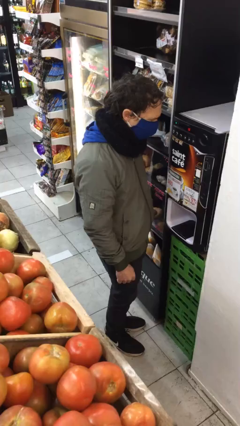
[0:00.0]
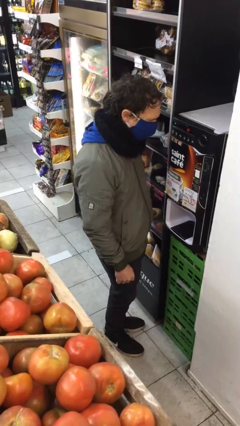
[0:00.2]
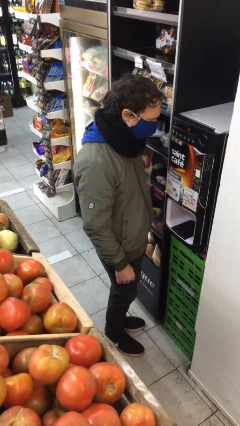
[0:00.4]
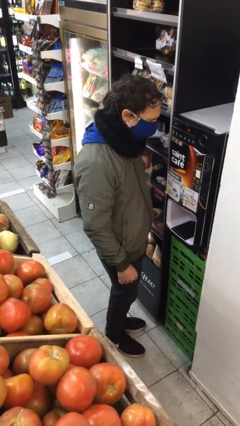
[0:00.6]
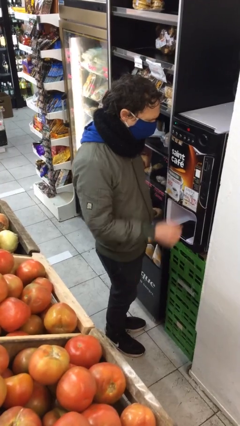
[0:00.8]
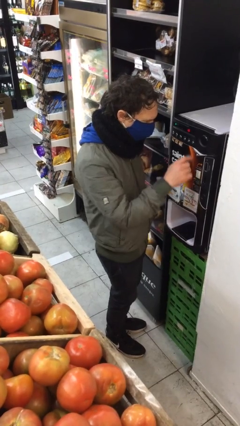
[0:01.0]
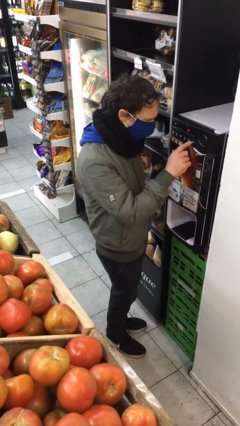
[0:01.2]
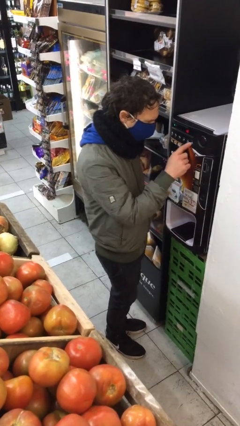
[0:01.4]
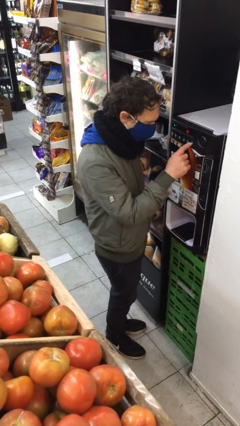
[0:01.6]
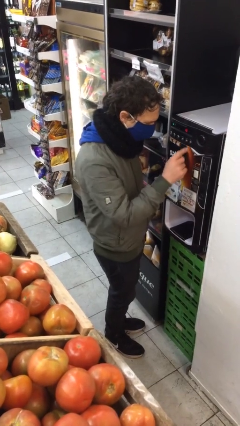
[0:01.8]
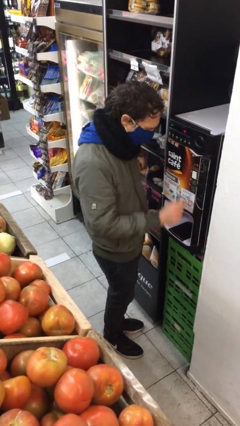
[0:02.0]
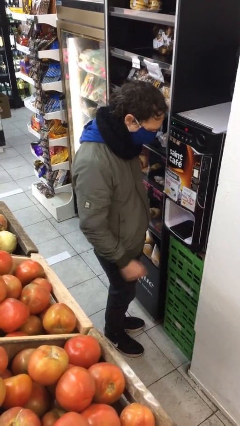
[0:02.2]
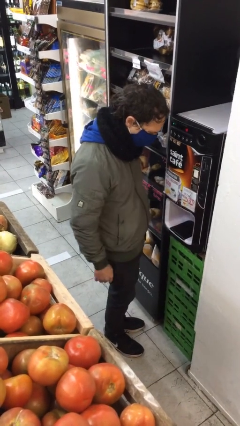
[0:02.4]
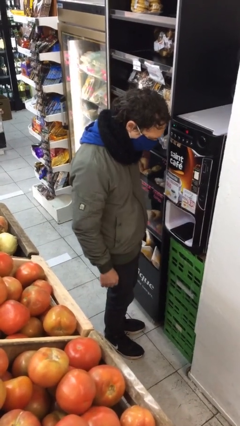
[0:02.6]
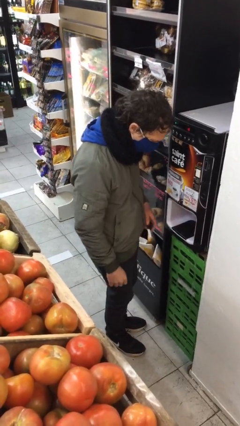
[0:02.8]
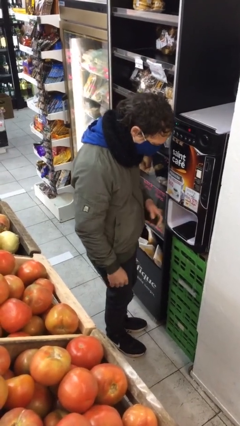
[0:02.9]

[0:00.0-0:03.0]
person purchases from machine

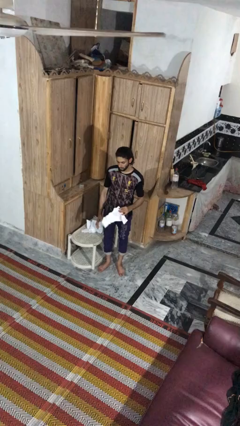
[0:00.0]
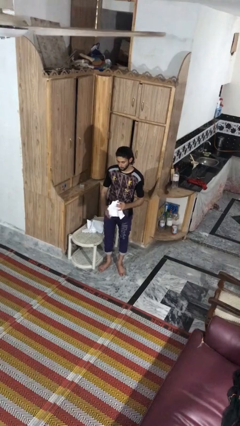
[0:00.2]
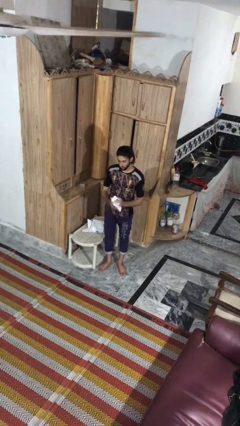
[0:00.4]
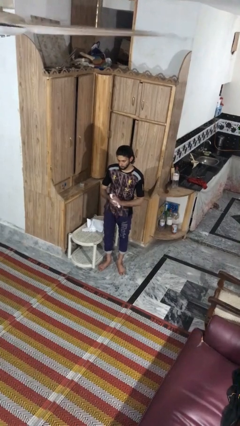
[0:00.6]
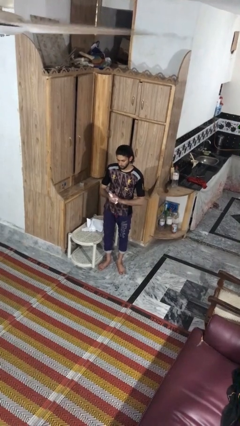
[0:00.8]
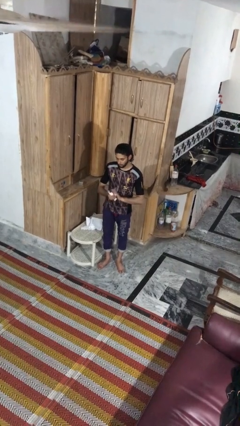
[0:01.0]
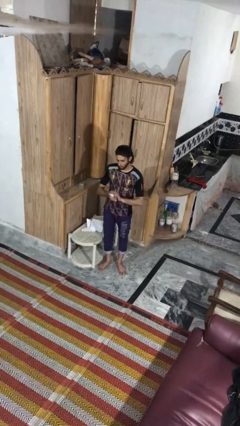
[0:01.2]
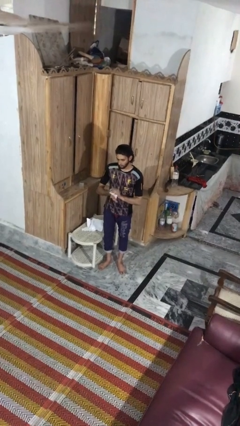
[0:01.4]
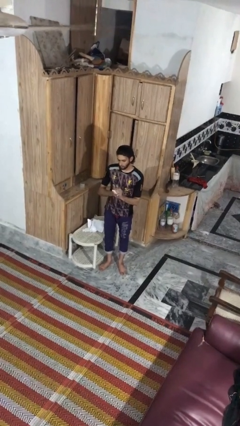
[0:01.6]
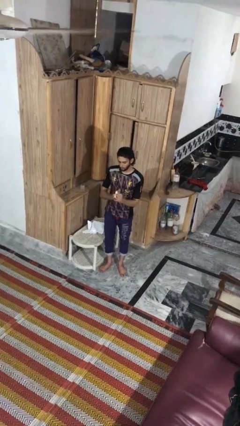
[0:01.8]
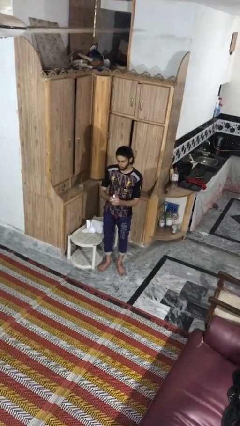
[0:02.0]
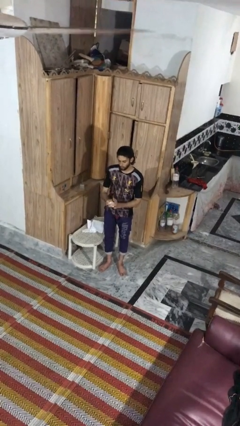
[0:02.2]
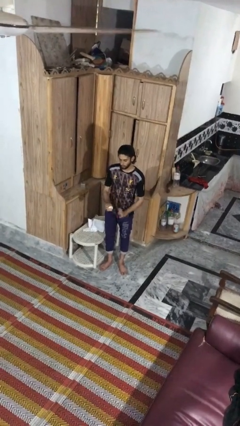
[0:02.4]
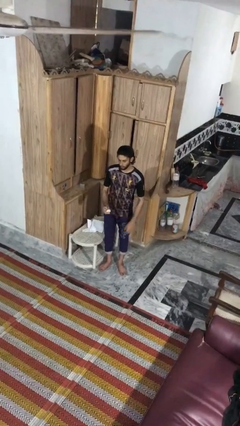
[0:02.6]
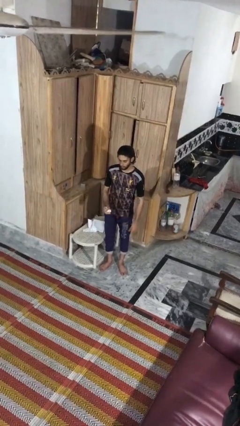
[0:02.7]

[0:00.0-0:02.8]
person crumples paper

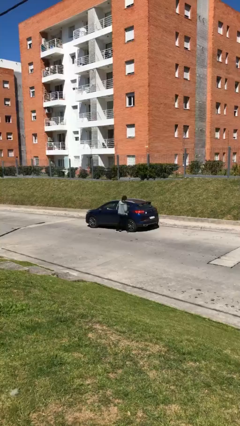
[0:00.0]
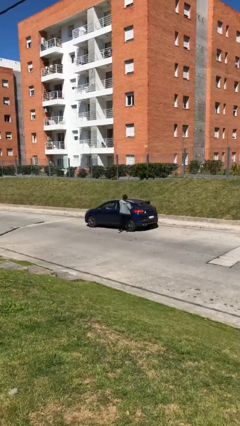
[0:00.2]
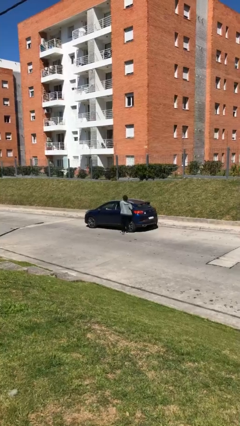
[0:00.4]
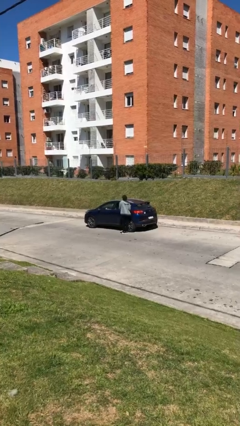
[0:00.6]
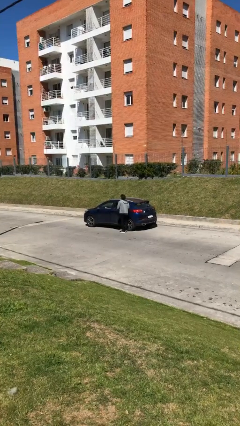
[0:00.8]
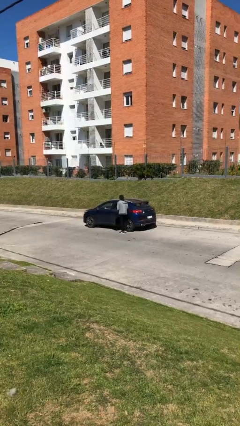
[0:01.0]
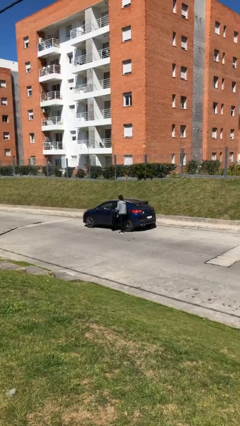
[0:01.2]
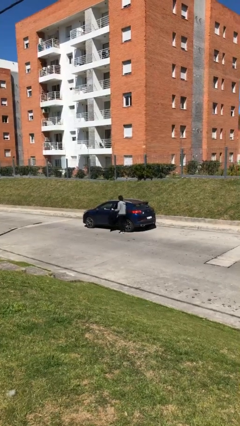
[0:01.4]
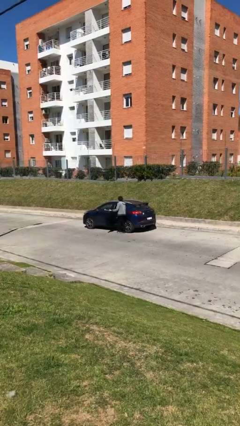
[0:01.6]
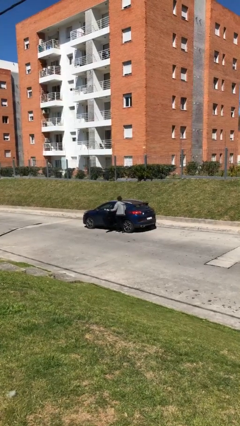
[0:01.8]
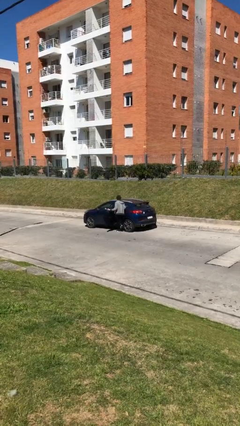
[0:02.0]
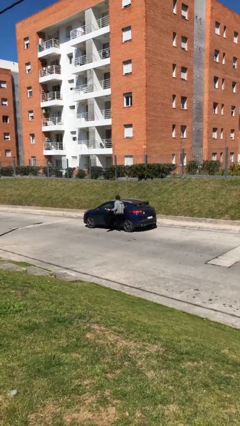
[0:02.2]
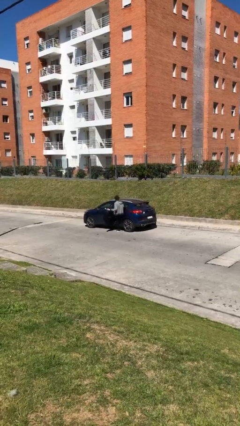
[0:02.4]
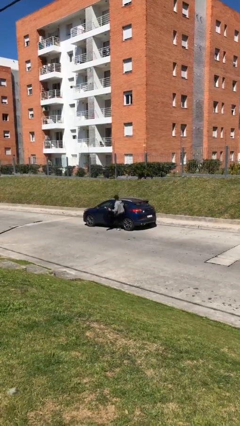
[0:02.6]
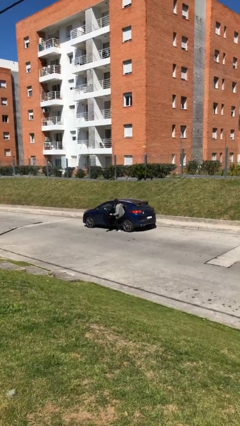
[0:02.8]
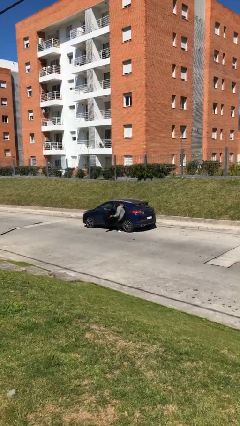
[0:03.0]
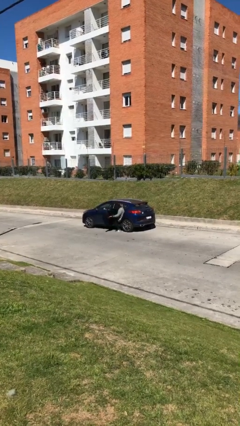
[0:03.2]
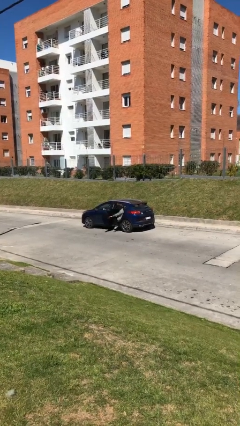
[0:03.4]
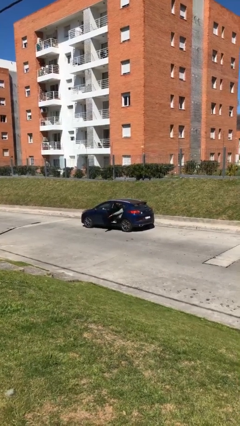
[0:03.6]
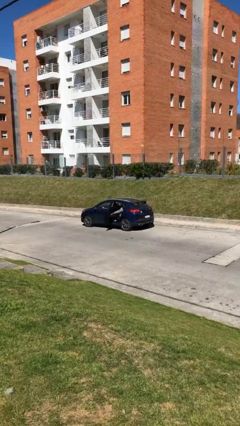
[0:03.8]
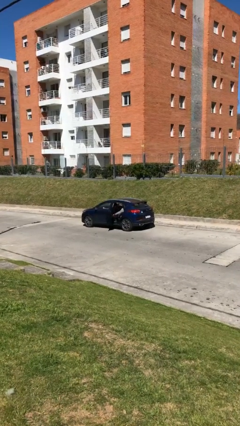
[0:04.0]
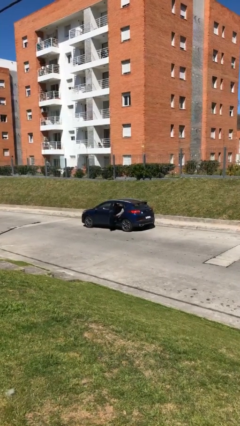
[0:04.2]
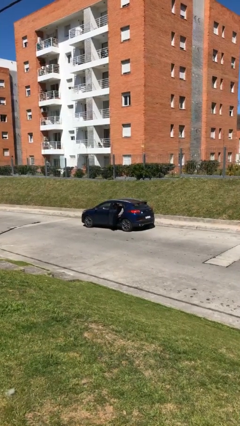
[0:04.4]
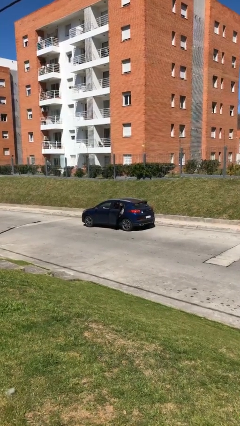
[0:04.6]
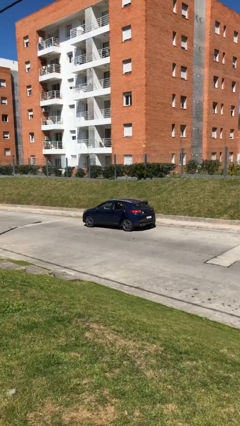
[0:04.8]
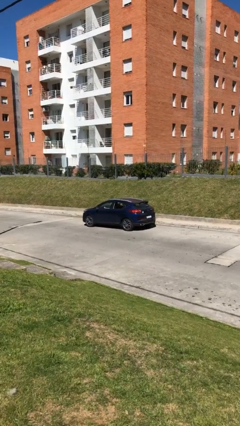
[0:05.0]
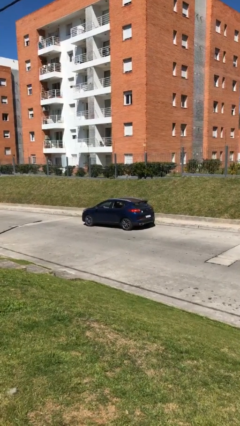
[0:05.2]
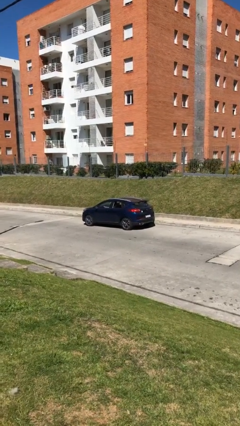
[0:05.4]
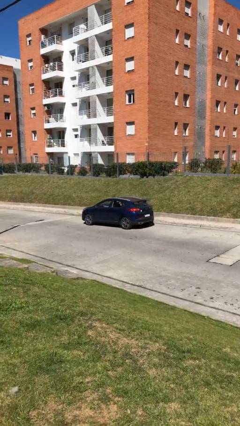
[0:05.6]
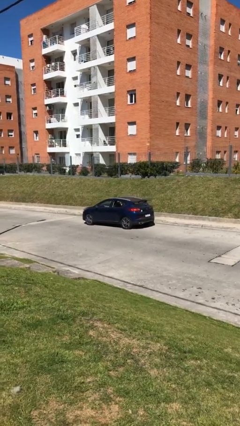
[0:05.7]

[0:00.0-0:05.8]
car picks up person

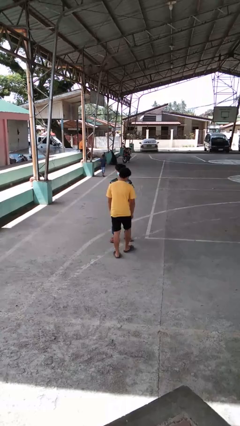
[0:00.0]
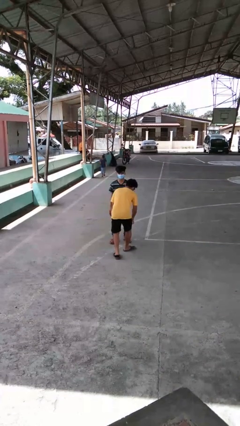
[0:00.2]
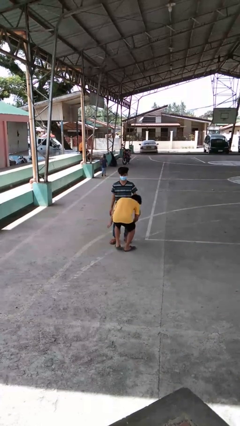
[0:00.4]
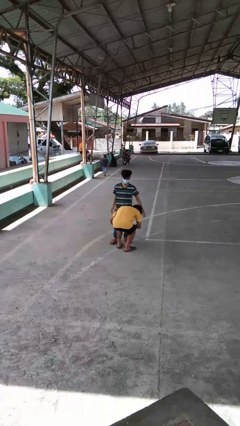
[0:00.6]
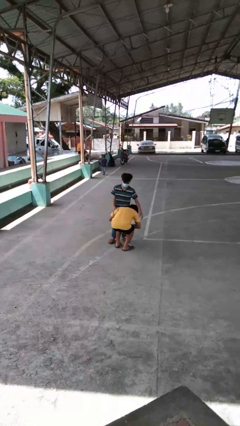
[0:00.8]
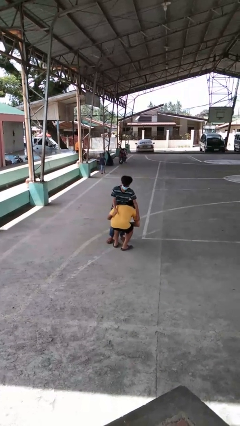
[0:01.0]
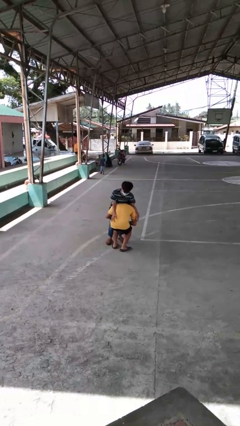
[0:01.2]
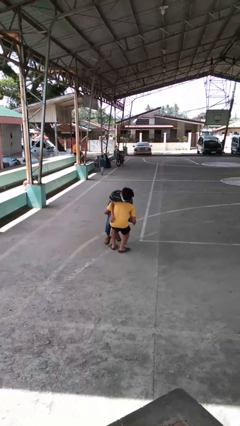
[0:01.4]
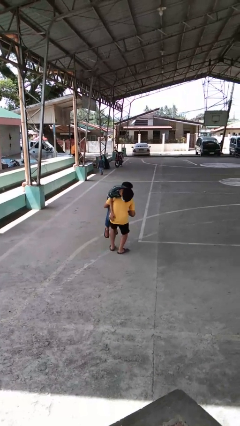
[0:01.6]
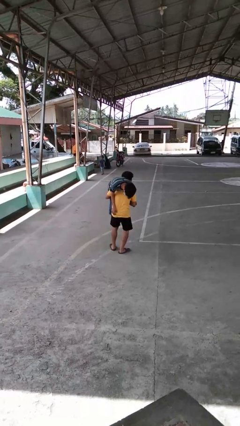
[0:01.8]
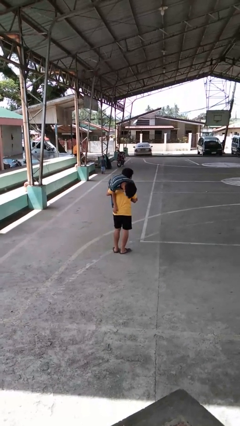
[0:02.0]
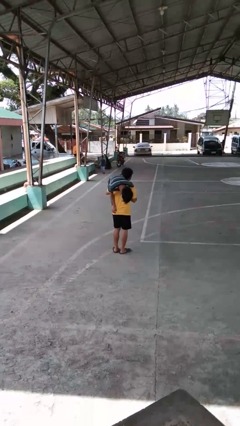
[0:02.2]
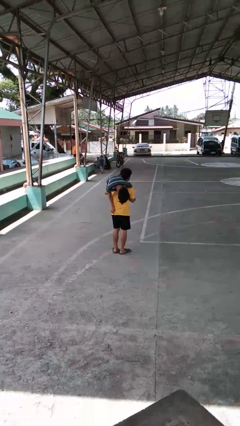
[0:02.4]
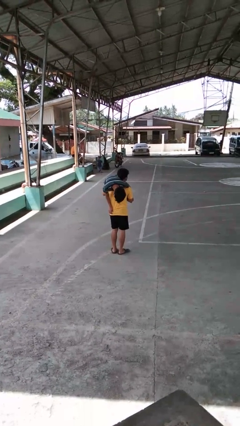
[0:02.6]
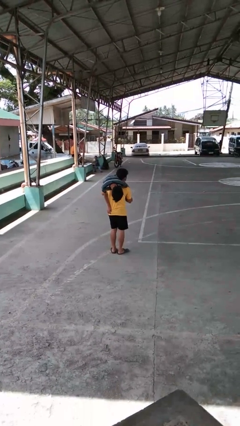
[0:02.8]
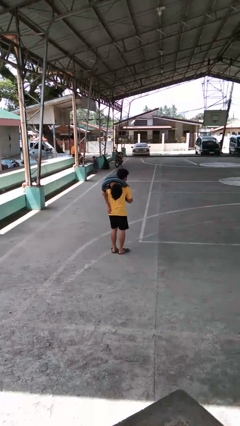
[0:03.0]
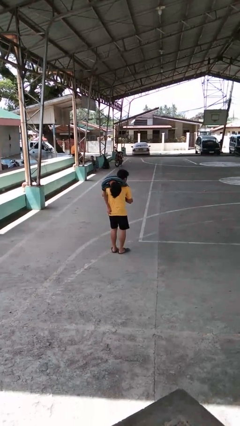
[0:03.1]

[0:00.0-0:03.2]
person carries person over shoulder

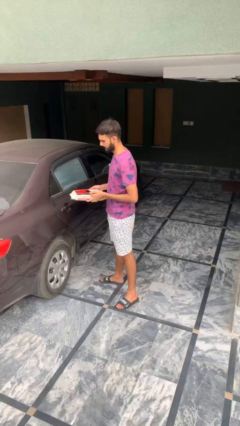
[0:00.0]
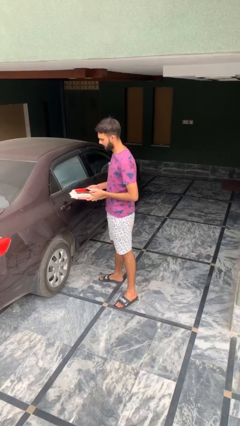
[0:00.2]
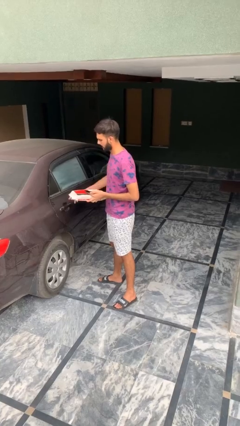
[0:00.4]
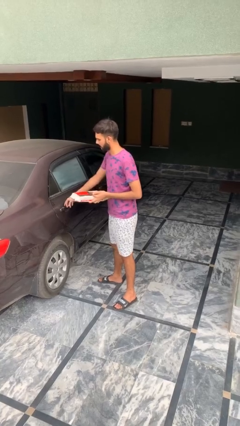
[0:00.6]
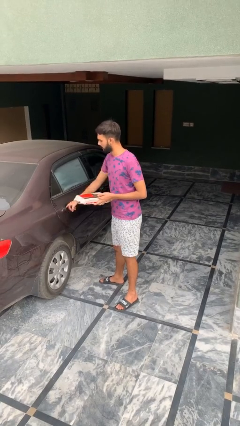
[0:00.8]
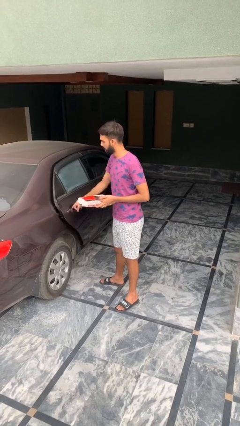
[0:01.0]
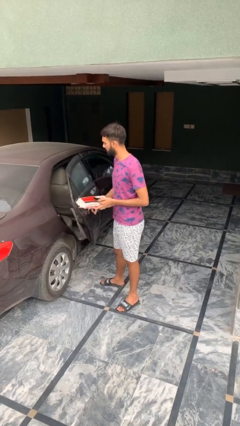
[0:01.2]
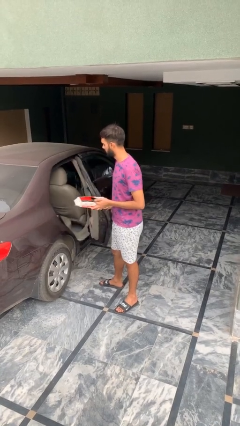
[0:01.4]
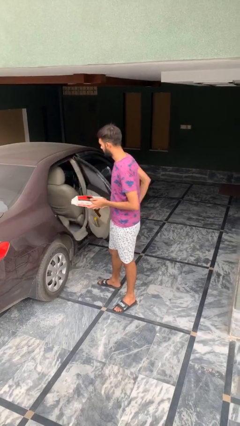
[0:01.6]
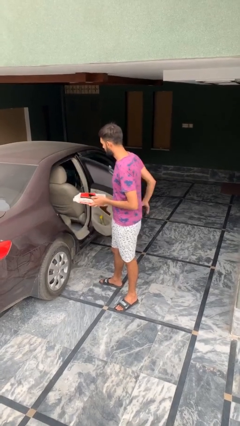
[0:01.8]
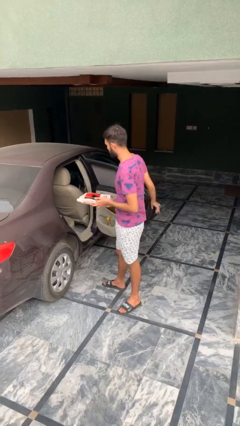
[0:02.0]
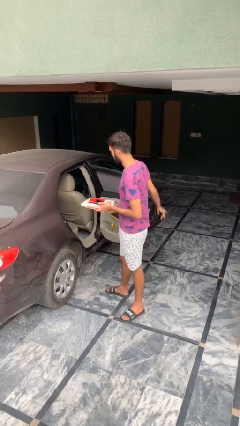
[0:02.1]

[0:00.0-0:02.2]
person opens car door

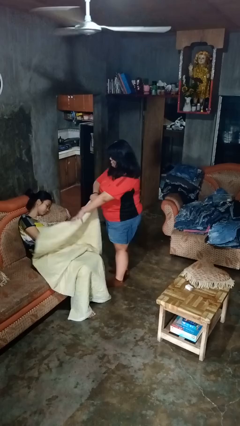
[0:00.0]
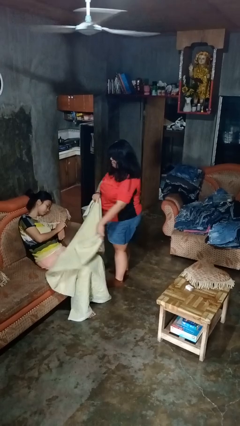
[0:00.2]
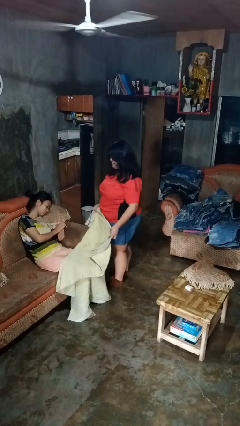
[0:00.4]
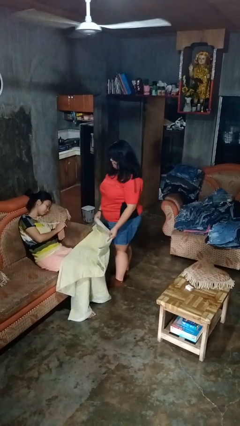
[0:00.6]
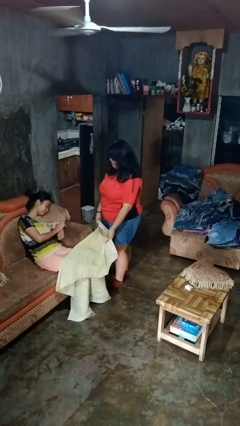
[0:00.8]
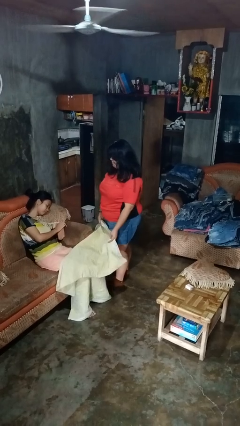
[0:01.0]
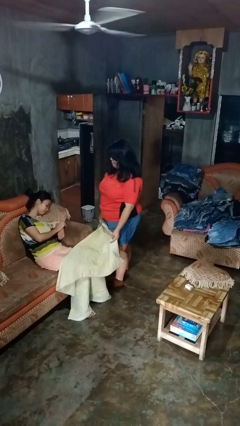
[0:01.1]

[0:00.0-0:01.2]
person uncovers friend with blanket
